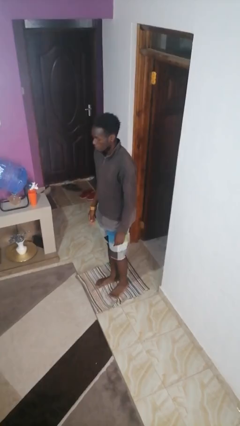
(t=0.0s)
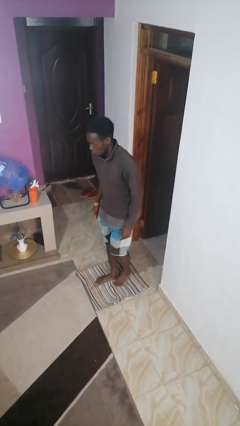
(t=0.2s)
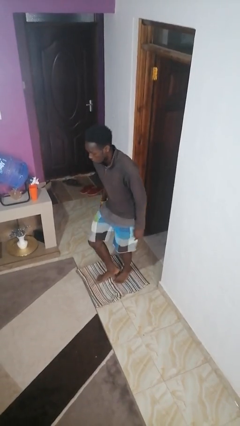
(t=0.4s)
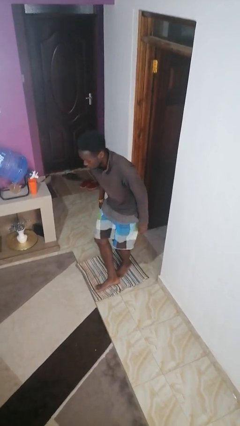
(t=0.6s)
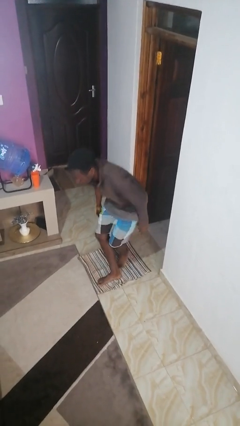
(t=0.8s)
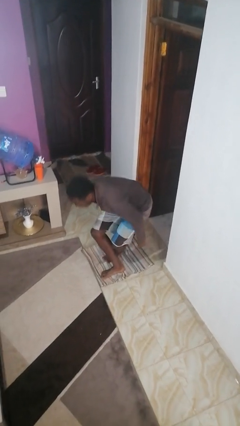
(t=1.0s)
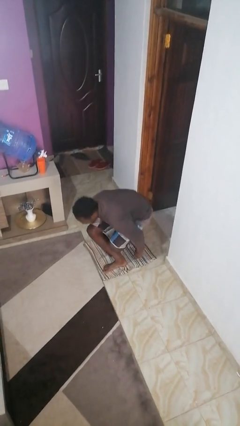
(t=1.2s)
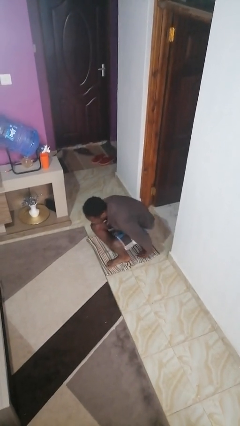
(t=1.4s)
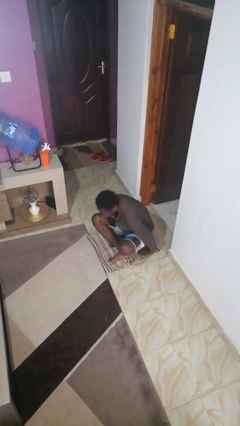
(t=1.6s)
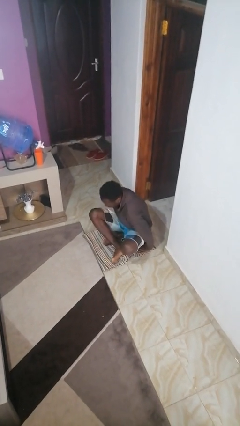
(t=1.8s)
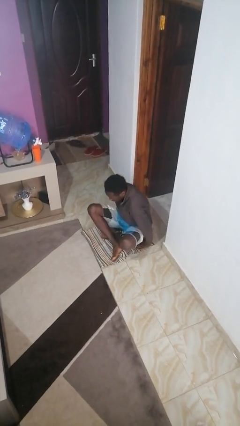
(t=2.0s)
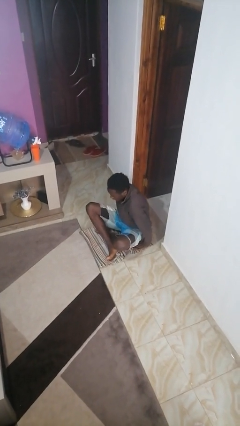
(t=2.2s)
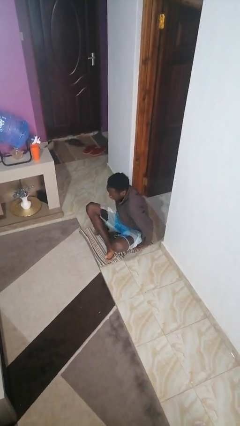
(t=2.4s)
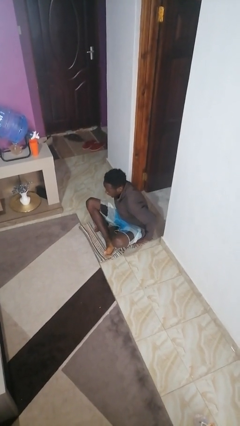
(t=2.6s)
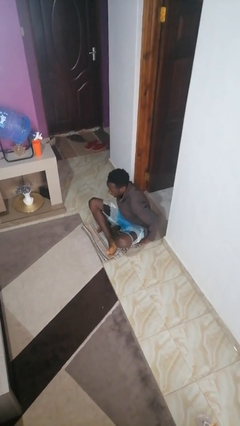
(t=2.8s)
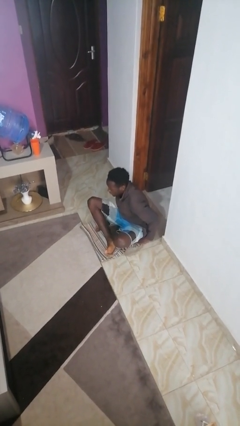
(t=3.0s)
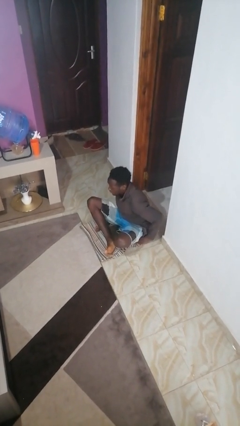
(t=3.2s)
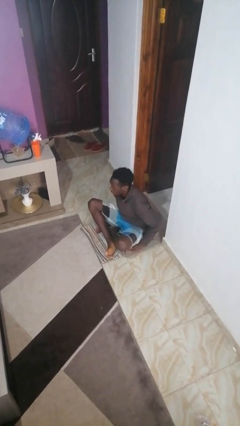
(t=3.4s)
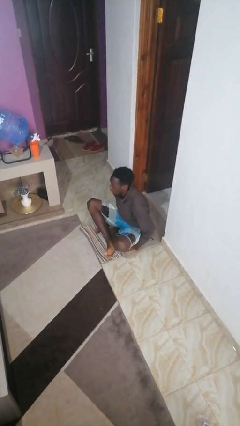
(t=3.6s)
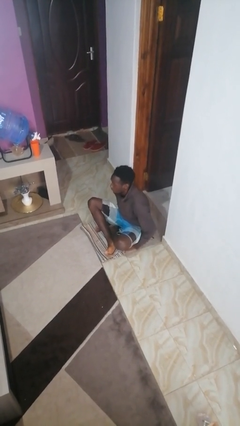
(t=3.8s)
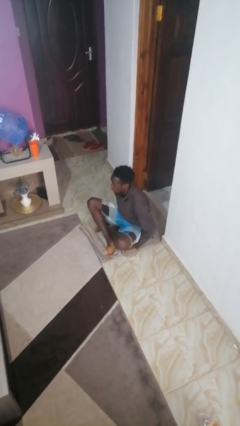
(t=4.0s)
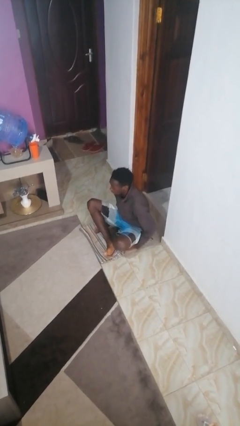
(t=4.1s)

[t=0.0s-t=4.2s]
person sits crisscross

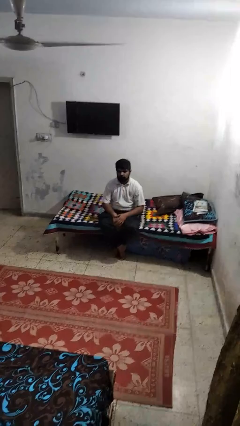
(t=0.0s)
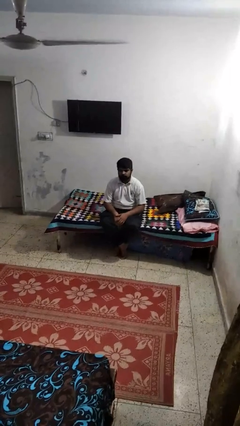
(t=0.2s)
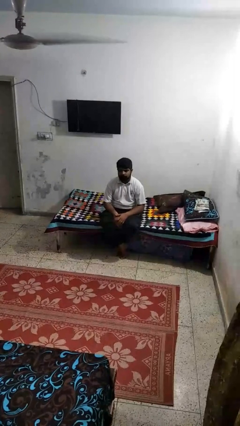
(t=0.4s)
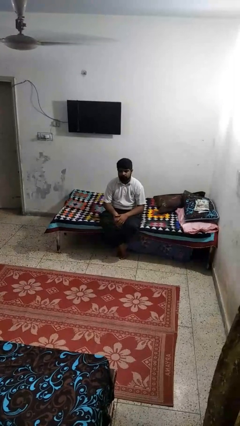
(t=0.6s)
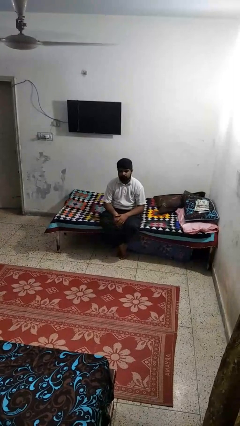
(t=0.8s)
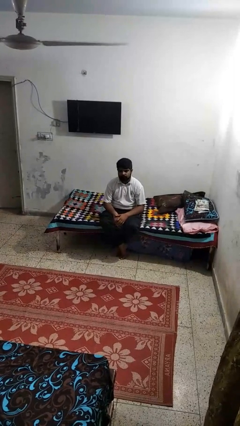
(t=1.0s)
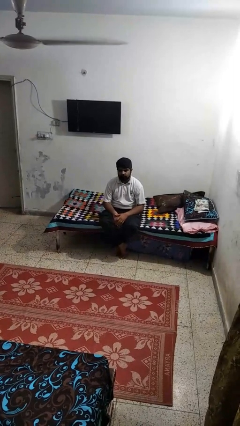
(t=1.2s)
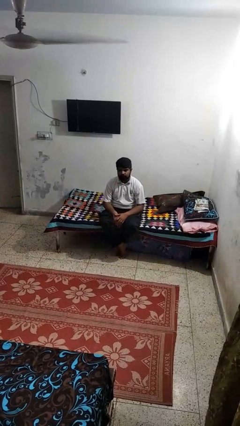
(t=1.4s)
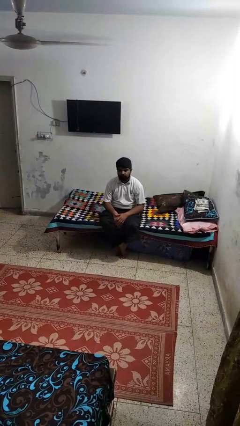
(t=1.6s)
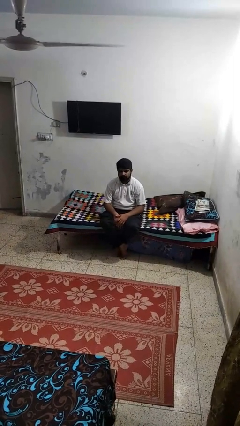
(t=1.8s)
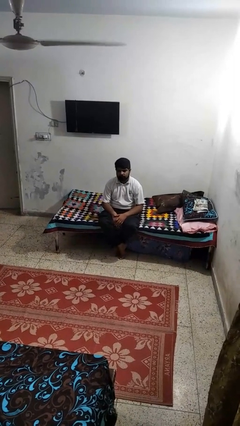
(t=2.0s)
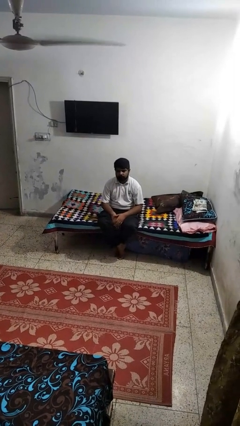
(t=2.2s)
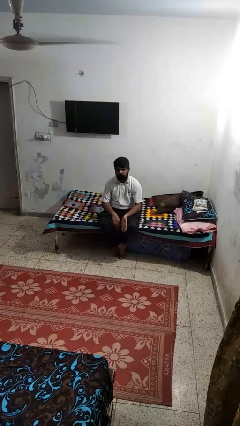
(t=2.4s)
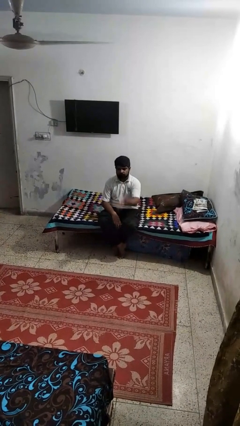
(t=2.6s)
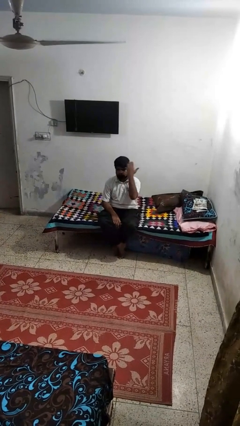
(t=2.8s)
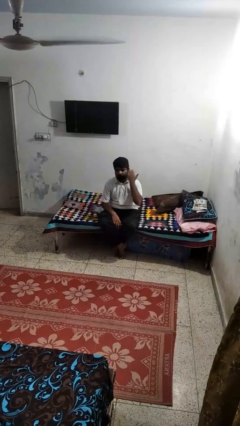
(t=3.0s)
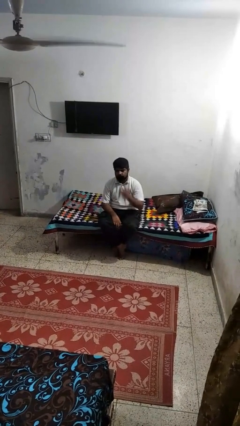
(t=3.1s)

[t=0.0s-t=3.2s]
person gestures swipe up

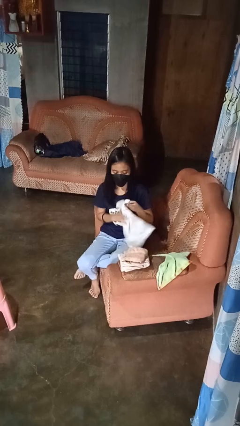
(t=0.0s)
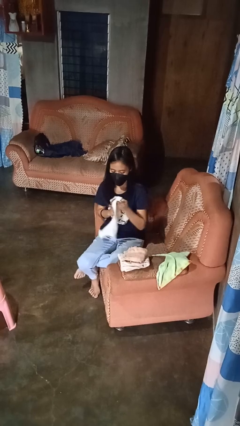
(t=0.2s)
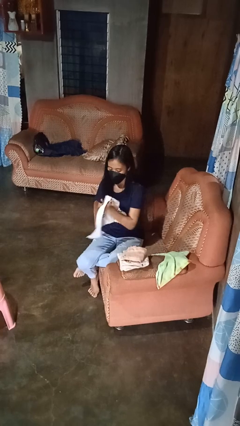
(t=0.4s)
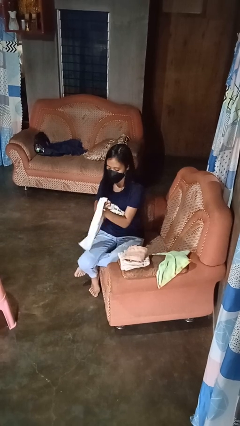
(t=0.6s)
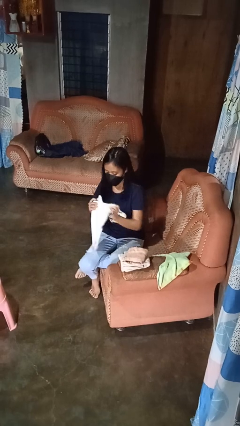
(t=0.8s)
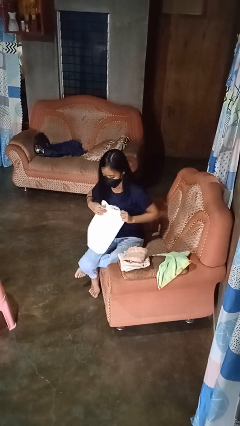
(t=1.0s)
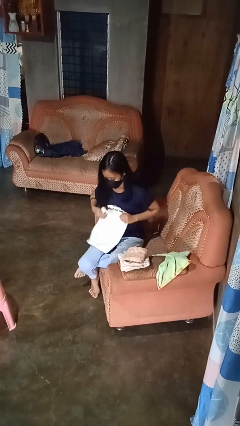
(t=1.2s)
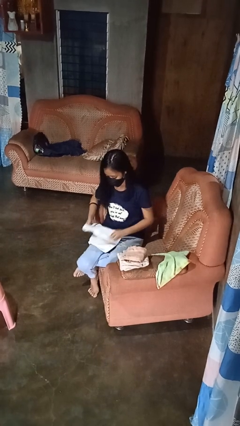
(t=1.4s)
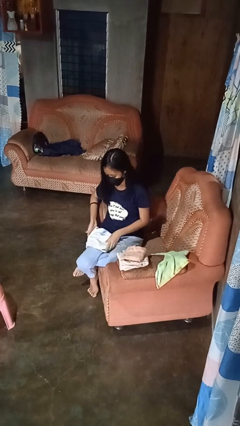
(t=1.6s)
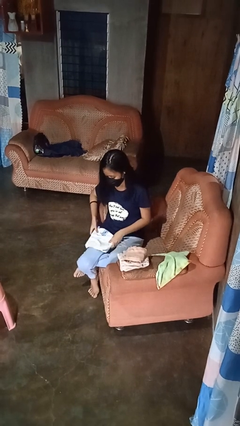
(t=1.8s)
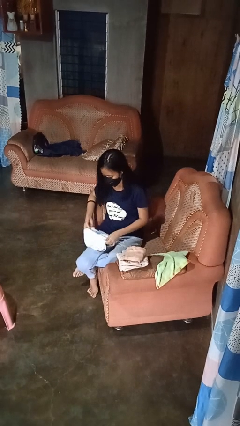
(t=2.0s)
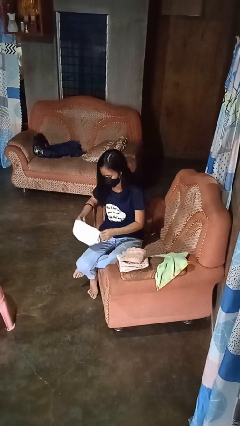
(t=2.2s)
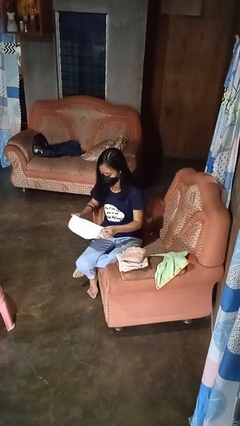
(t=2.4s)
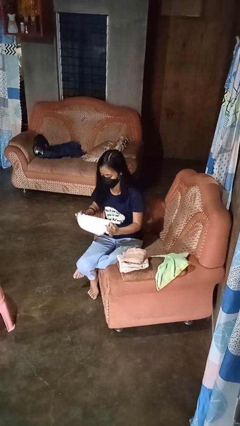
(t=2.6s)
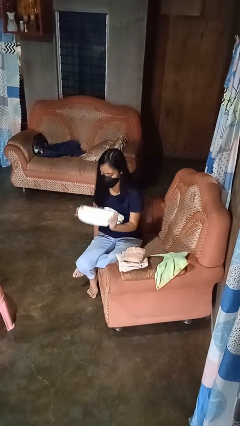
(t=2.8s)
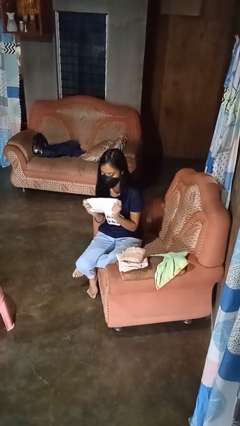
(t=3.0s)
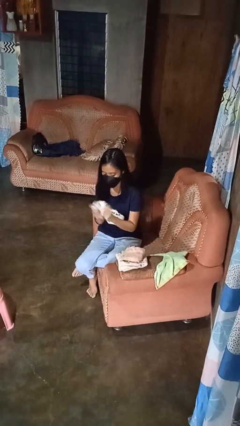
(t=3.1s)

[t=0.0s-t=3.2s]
person folds towel

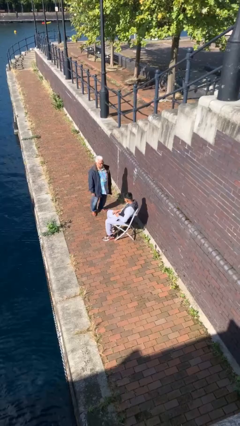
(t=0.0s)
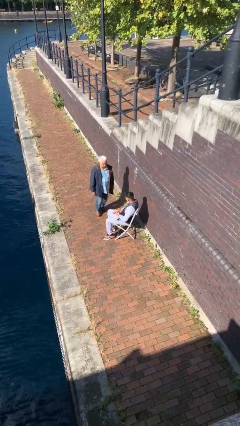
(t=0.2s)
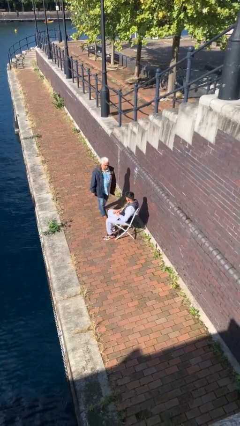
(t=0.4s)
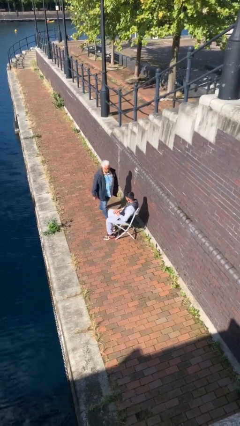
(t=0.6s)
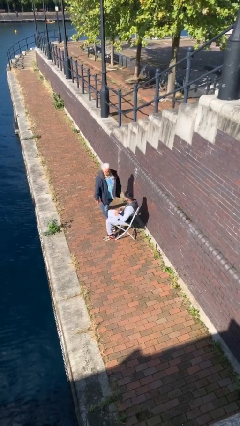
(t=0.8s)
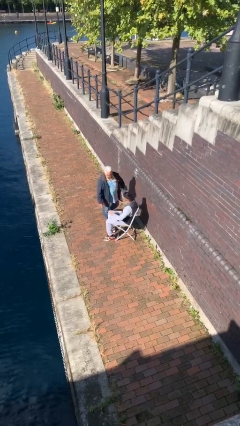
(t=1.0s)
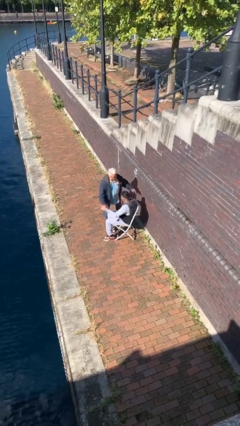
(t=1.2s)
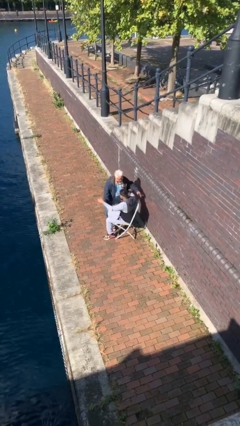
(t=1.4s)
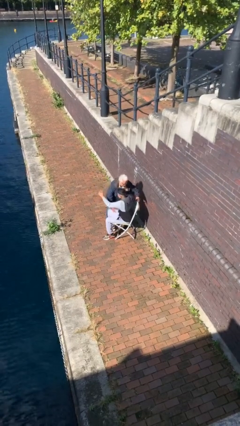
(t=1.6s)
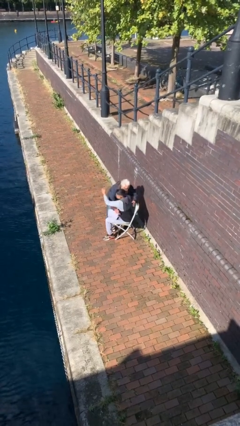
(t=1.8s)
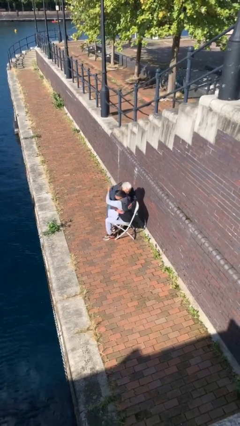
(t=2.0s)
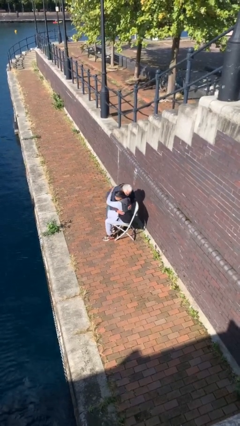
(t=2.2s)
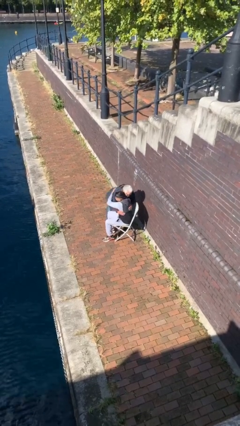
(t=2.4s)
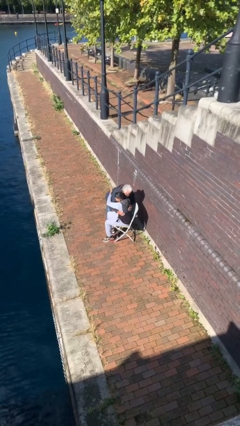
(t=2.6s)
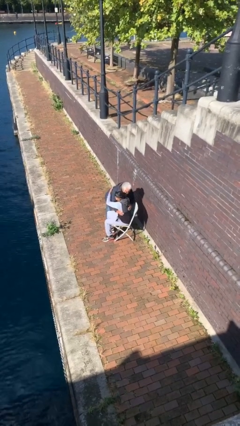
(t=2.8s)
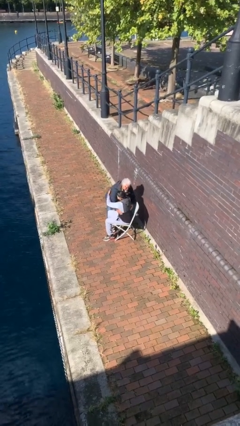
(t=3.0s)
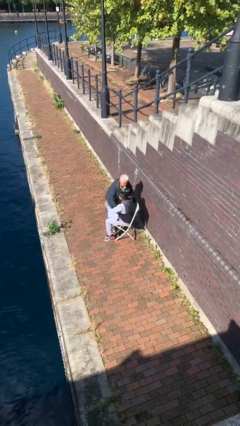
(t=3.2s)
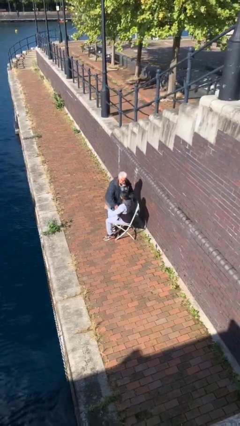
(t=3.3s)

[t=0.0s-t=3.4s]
person embraces person

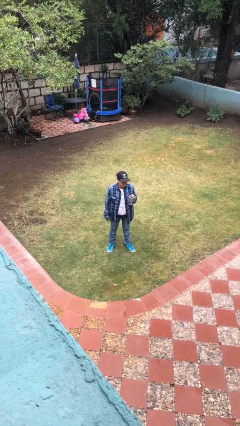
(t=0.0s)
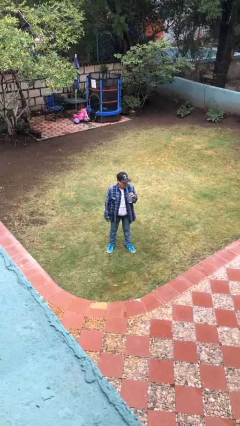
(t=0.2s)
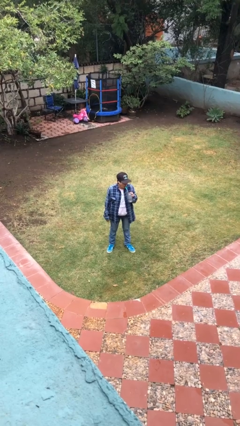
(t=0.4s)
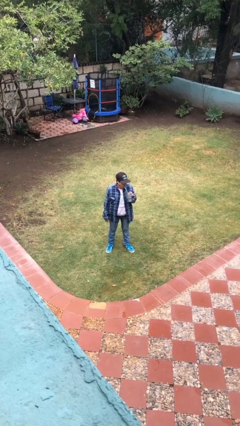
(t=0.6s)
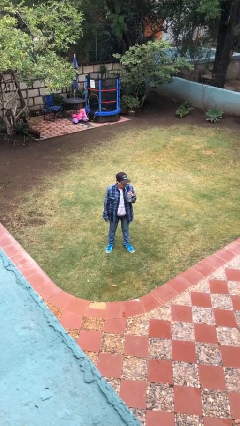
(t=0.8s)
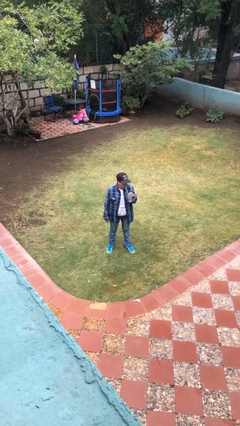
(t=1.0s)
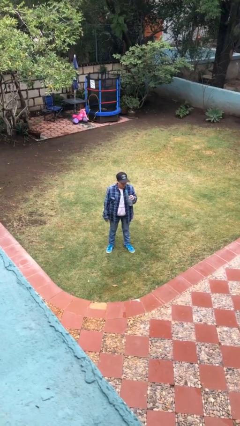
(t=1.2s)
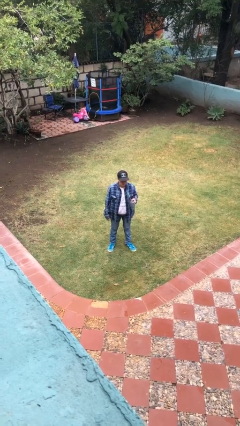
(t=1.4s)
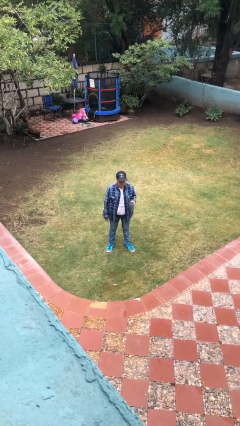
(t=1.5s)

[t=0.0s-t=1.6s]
person drinks from straw

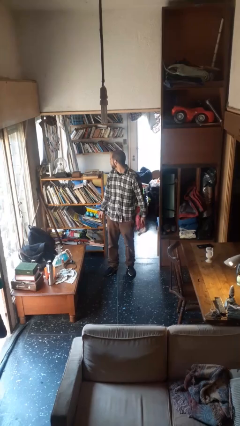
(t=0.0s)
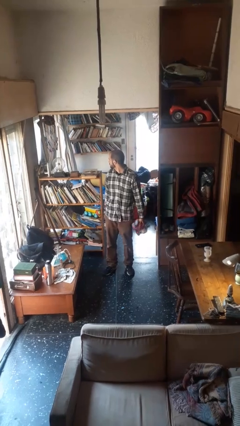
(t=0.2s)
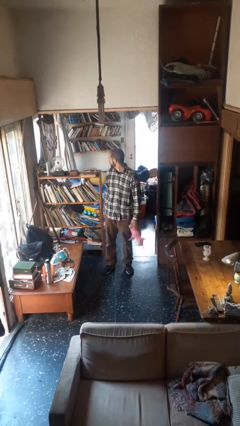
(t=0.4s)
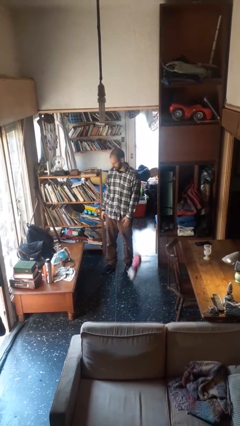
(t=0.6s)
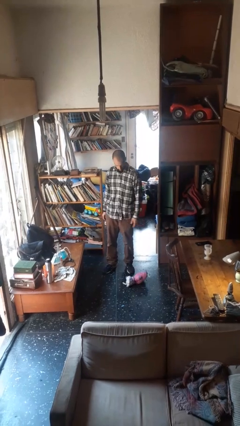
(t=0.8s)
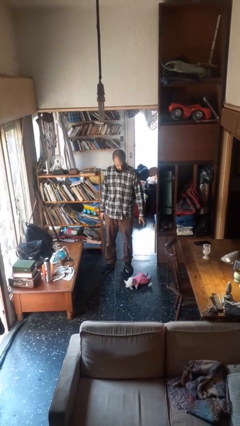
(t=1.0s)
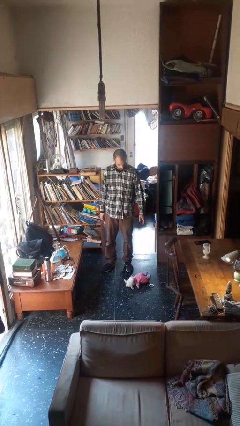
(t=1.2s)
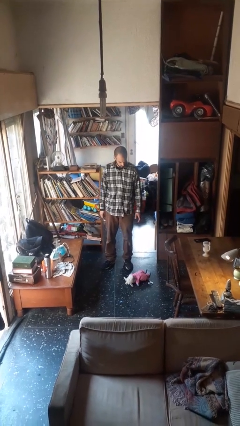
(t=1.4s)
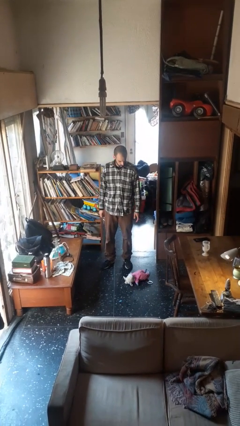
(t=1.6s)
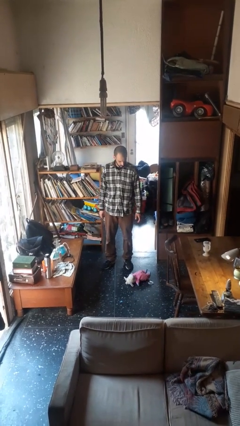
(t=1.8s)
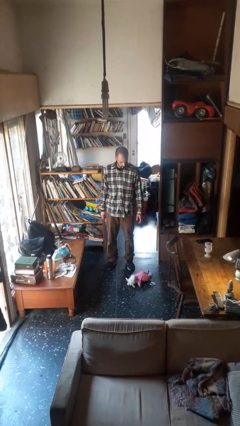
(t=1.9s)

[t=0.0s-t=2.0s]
person drops object
